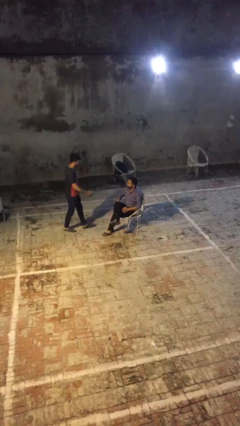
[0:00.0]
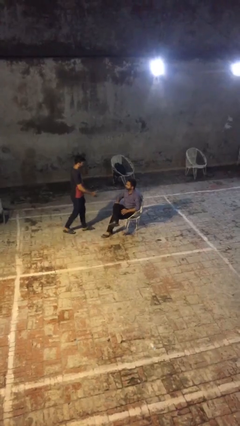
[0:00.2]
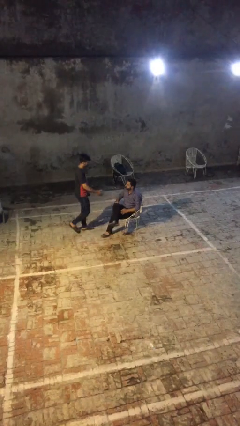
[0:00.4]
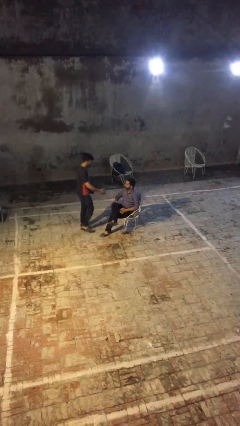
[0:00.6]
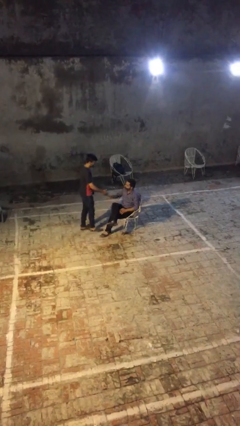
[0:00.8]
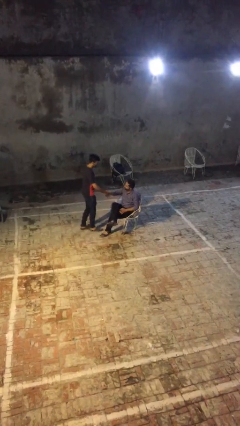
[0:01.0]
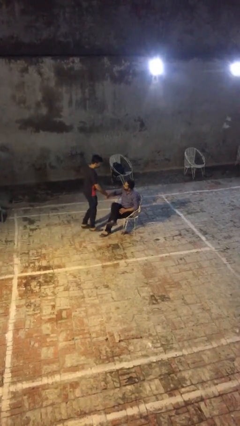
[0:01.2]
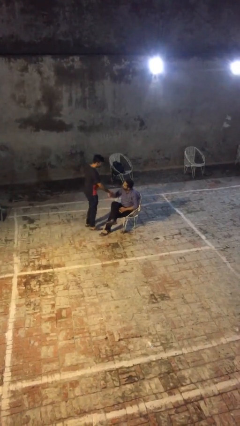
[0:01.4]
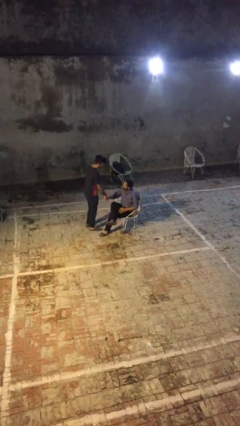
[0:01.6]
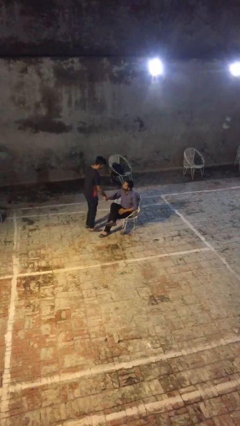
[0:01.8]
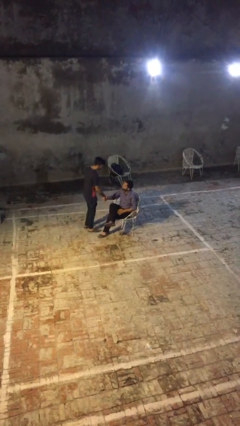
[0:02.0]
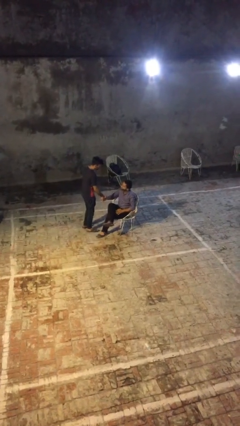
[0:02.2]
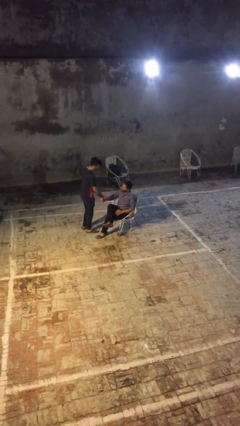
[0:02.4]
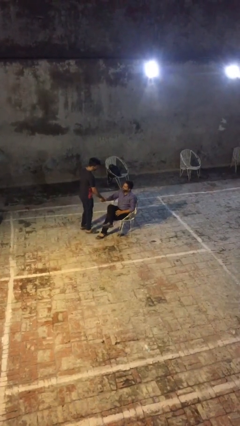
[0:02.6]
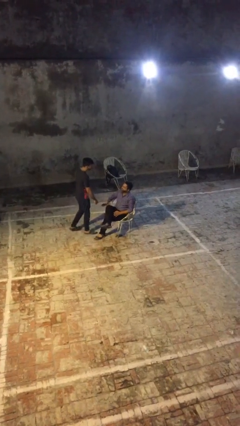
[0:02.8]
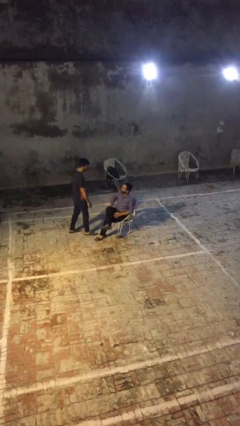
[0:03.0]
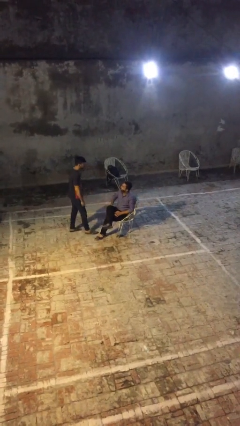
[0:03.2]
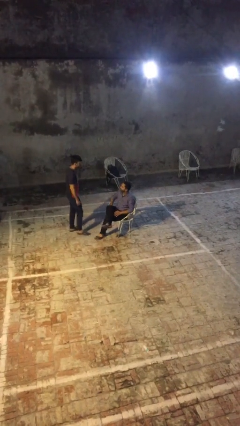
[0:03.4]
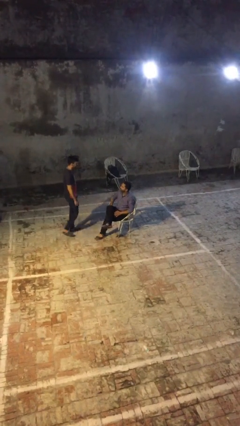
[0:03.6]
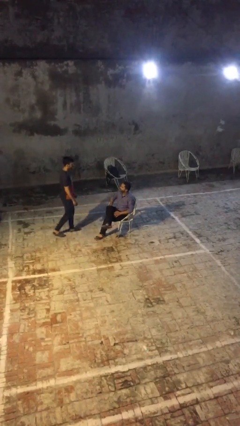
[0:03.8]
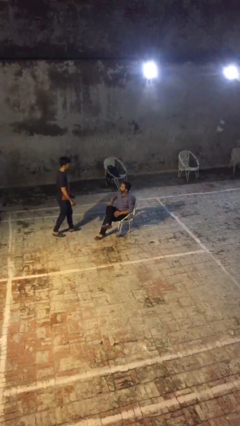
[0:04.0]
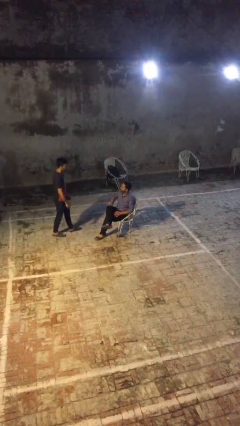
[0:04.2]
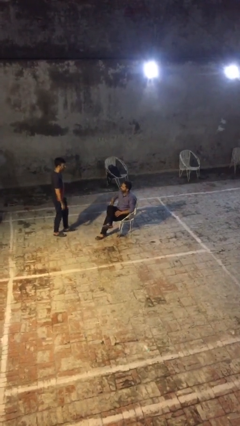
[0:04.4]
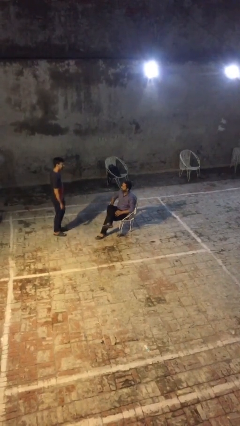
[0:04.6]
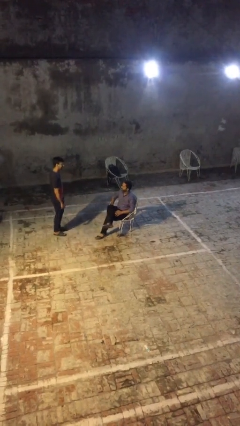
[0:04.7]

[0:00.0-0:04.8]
person shakes hand

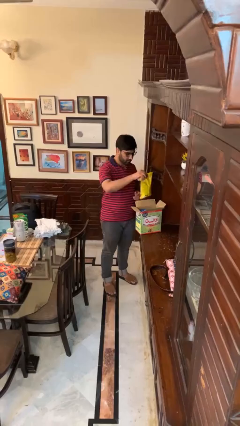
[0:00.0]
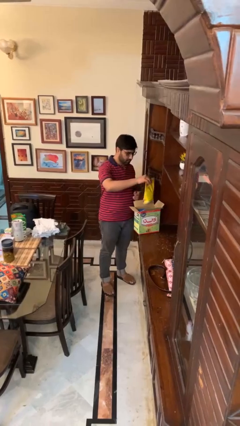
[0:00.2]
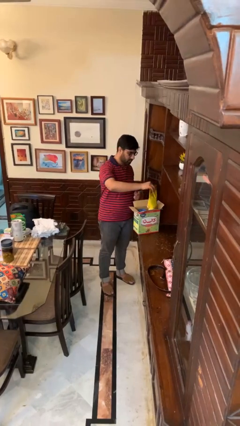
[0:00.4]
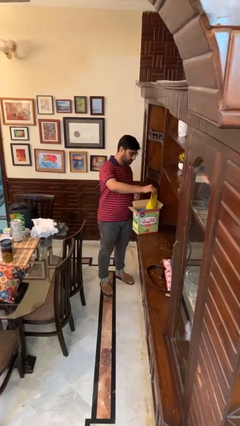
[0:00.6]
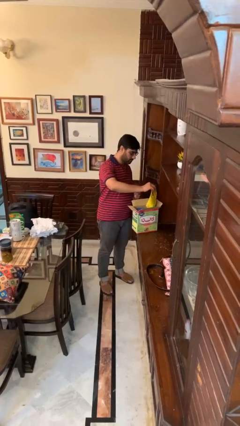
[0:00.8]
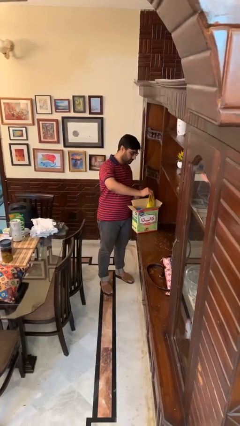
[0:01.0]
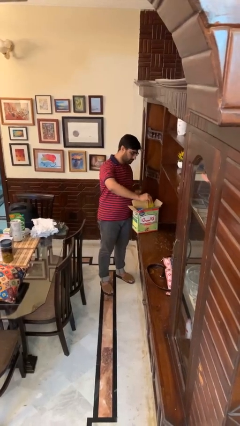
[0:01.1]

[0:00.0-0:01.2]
person puts object into box

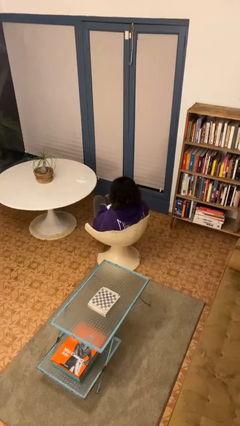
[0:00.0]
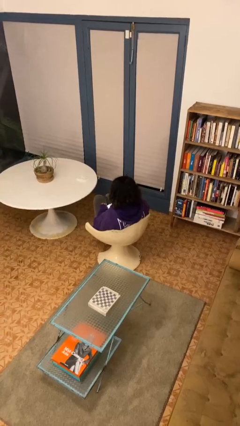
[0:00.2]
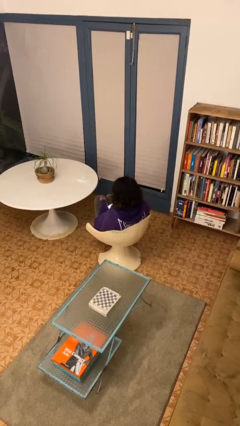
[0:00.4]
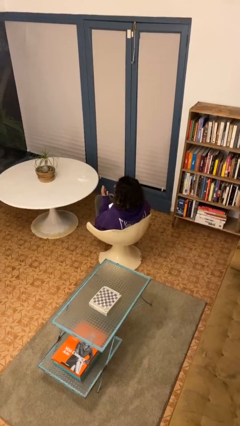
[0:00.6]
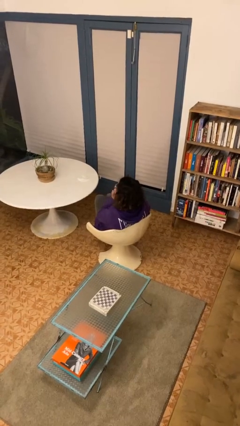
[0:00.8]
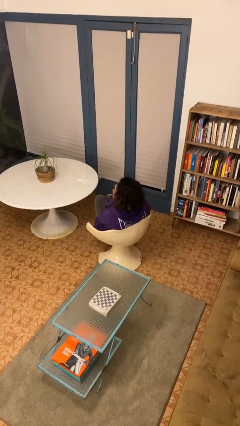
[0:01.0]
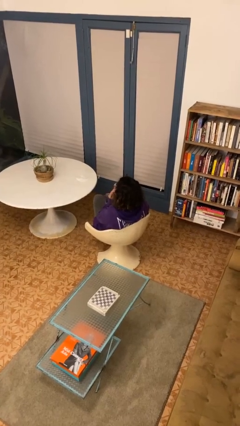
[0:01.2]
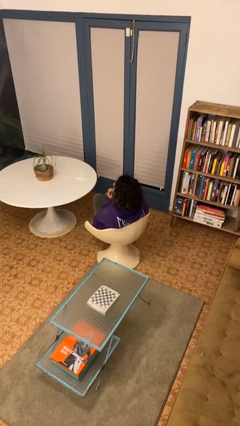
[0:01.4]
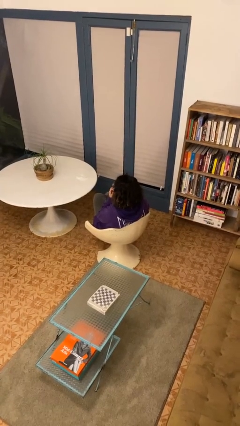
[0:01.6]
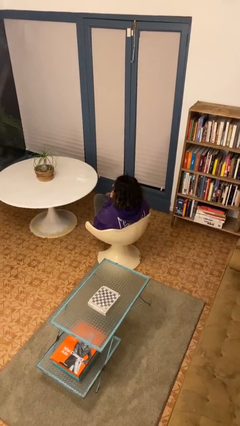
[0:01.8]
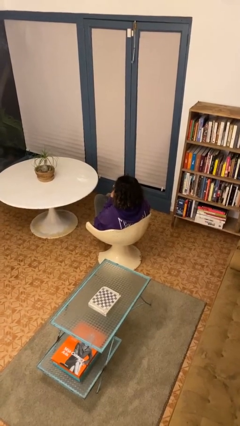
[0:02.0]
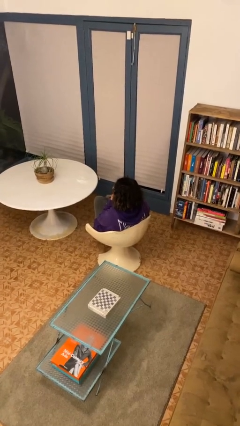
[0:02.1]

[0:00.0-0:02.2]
person strokes chin

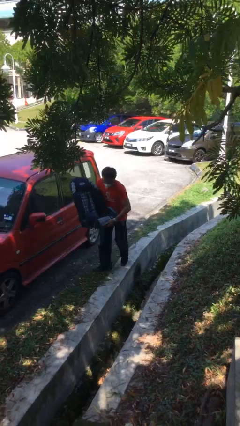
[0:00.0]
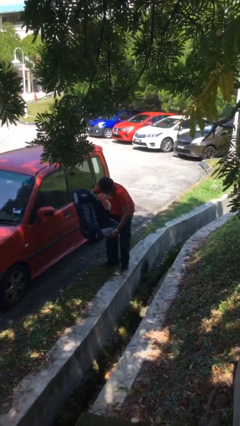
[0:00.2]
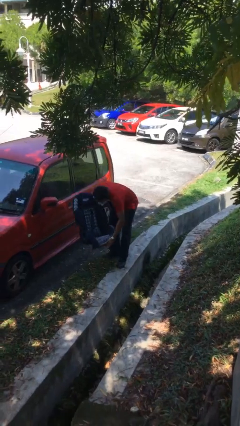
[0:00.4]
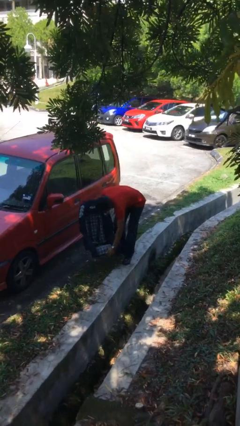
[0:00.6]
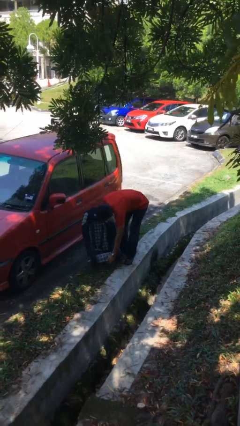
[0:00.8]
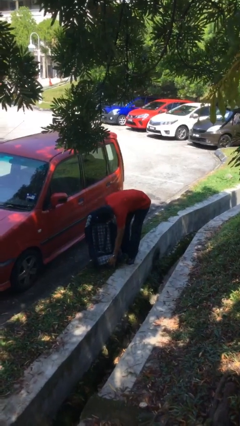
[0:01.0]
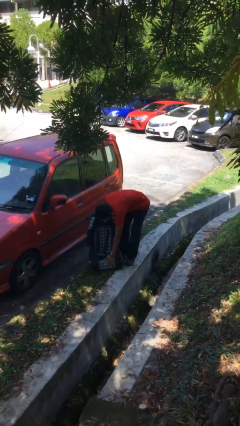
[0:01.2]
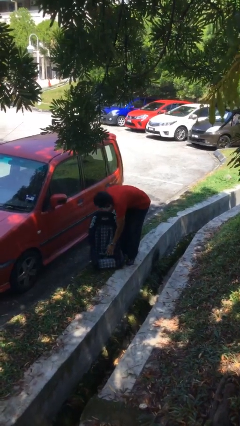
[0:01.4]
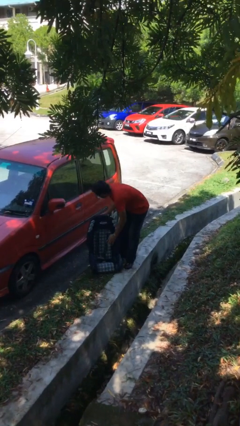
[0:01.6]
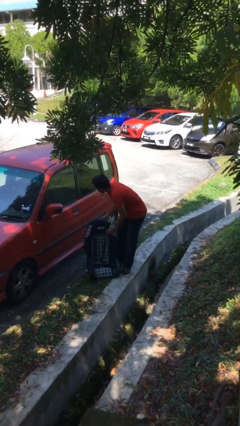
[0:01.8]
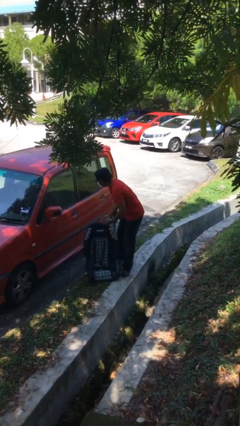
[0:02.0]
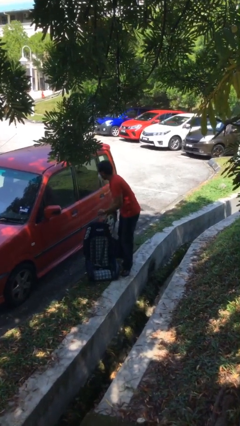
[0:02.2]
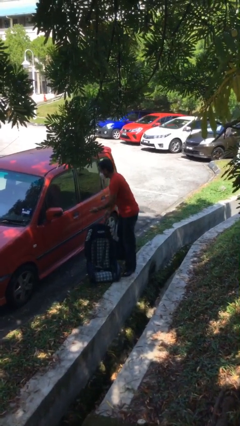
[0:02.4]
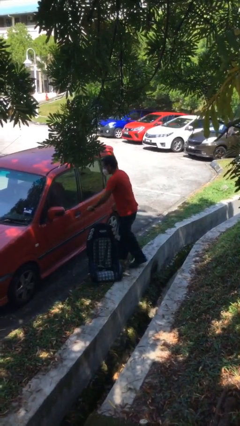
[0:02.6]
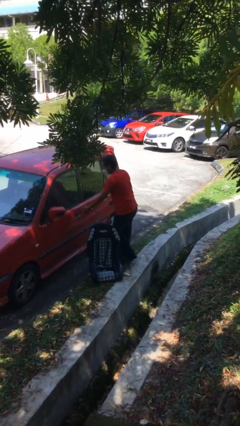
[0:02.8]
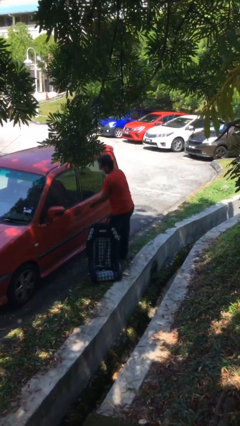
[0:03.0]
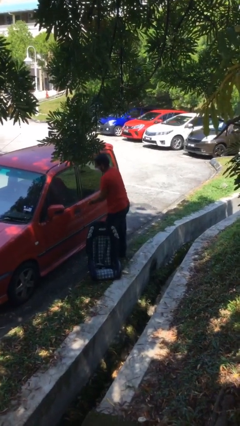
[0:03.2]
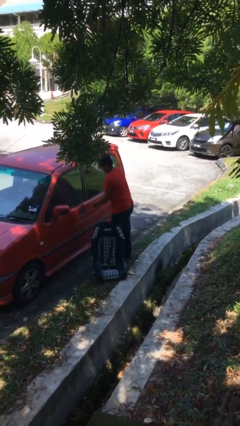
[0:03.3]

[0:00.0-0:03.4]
person puts down object on floor

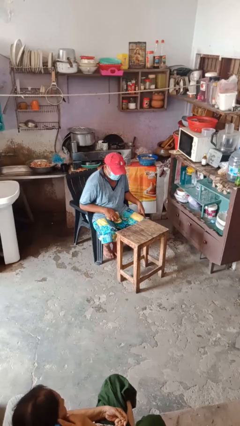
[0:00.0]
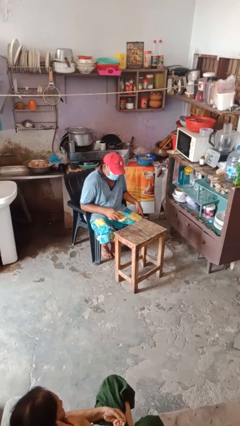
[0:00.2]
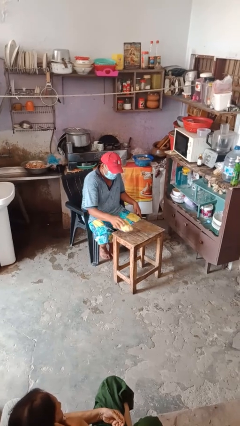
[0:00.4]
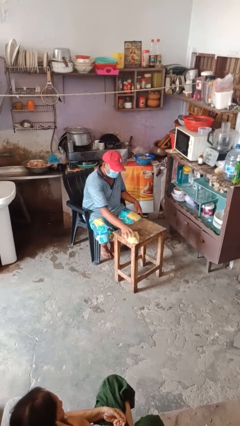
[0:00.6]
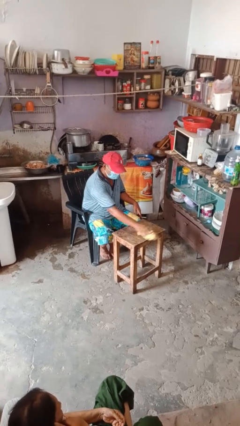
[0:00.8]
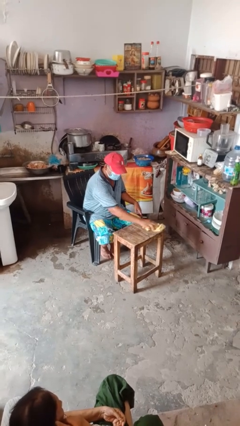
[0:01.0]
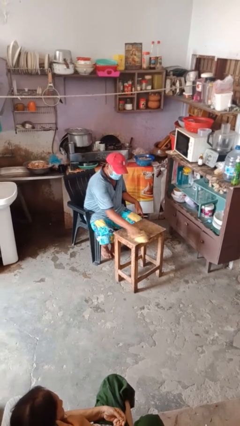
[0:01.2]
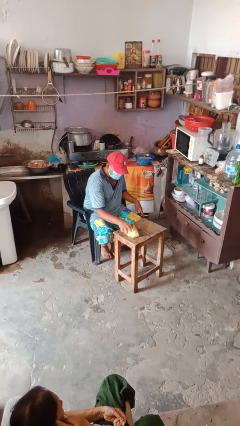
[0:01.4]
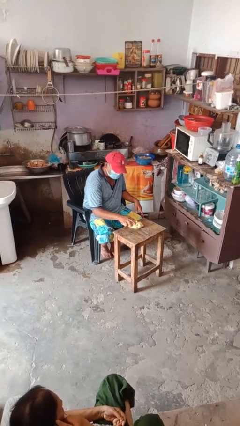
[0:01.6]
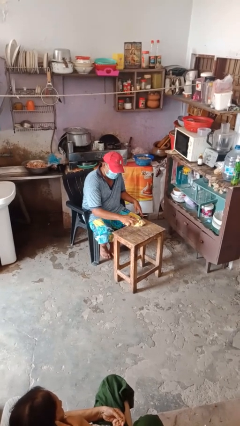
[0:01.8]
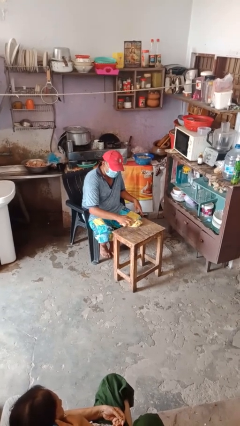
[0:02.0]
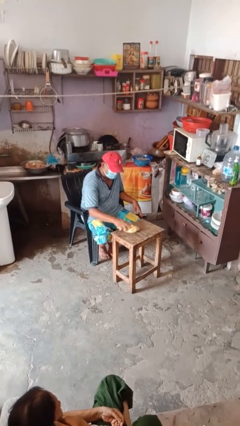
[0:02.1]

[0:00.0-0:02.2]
person cleans table with rag

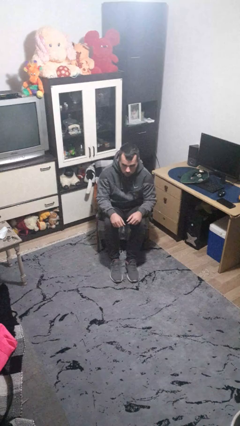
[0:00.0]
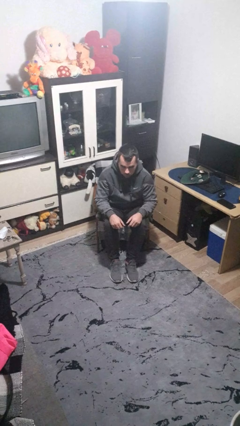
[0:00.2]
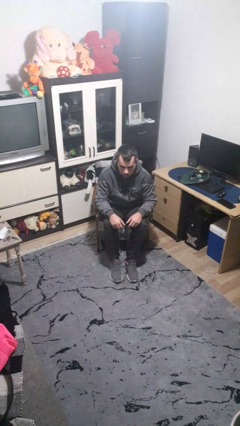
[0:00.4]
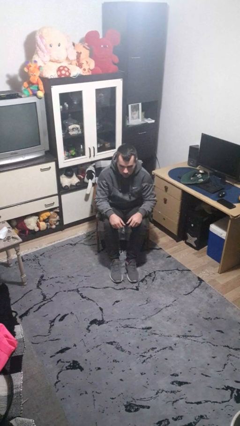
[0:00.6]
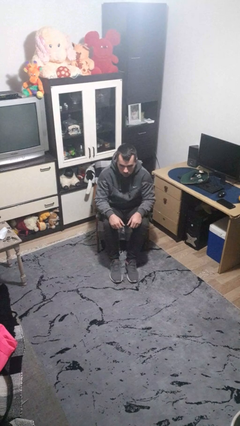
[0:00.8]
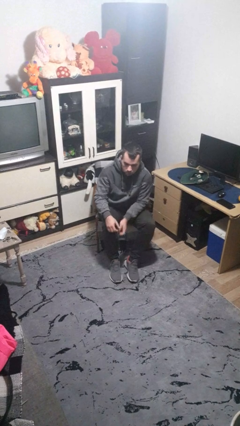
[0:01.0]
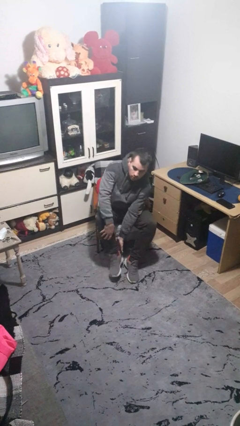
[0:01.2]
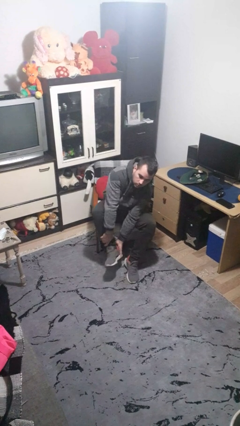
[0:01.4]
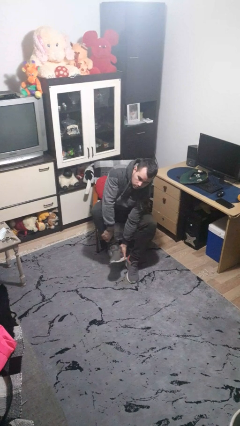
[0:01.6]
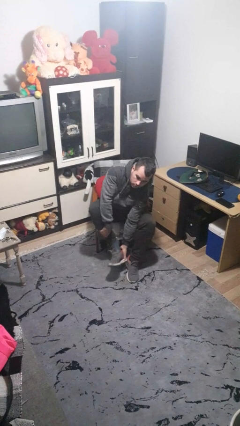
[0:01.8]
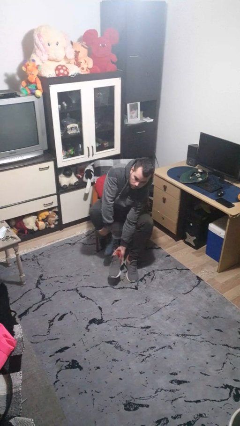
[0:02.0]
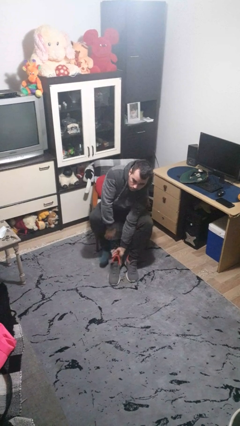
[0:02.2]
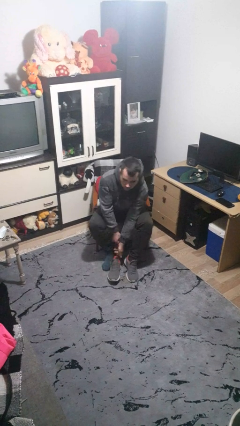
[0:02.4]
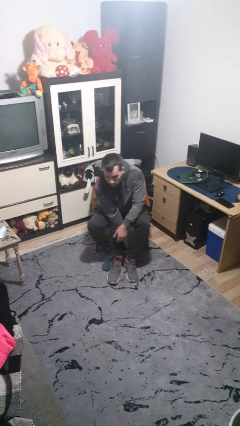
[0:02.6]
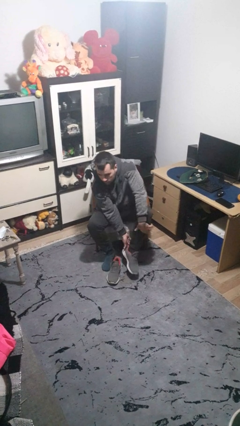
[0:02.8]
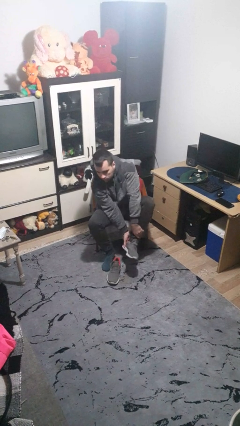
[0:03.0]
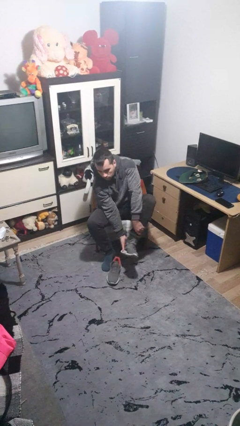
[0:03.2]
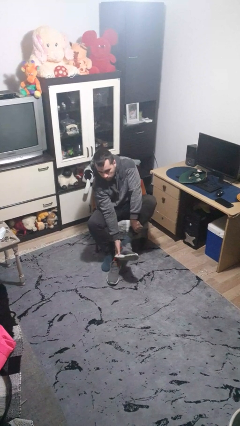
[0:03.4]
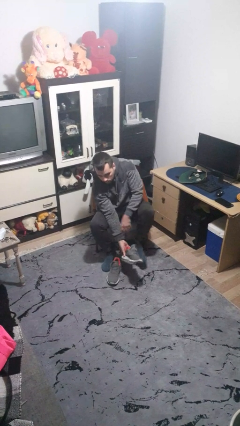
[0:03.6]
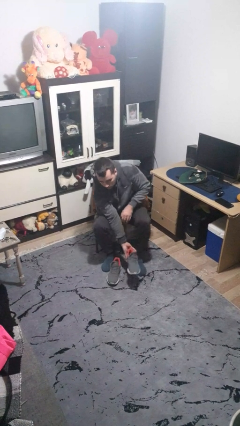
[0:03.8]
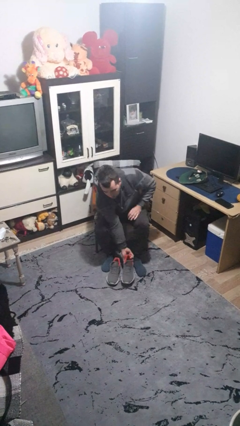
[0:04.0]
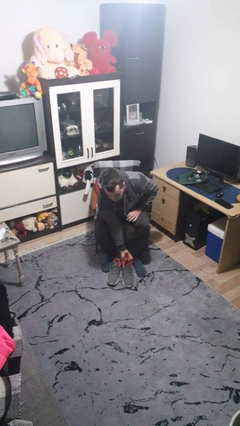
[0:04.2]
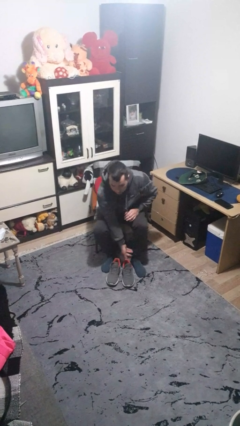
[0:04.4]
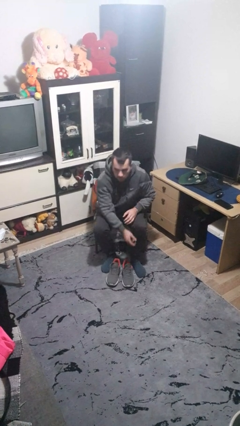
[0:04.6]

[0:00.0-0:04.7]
person takes off shoes
